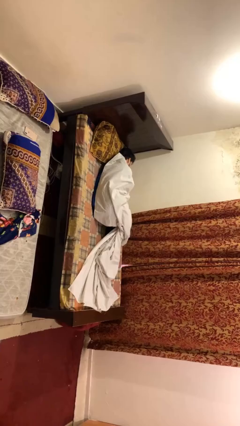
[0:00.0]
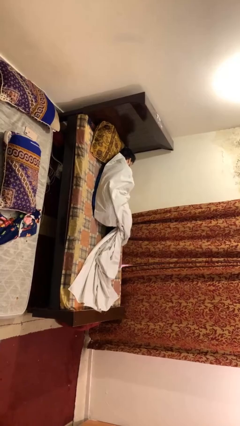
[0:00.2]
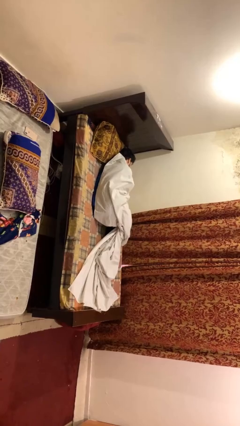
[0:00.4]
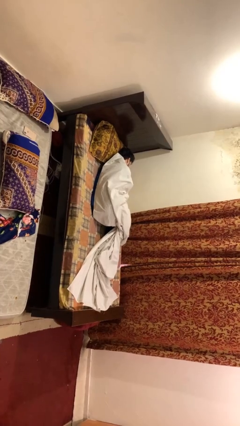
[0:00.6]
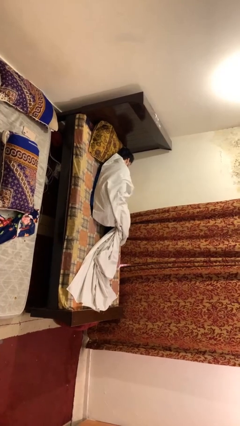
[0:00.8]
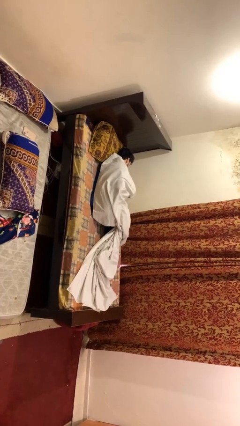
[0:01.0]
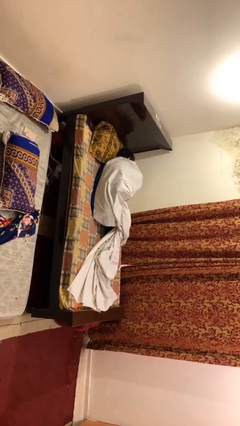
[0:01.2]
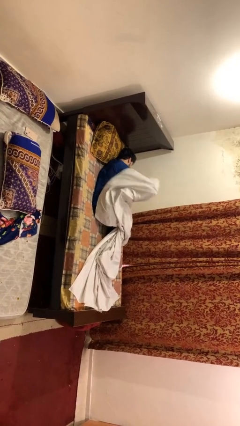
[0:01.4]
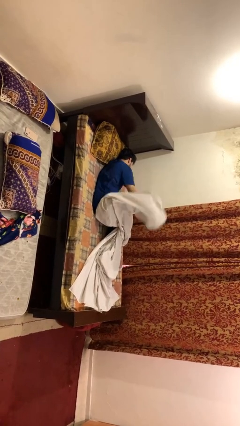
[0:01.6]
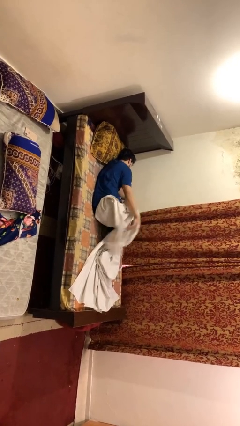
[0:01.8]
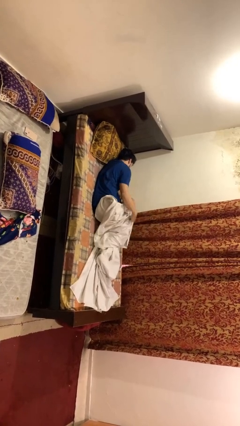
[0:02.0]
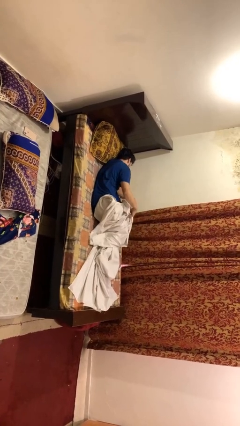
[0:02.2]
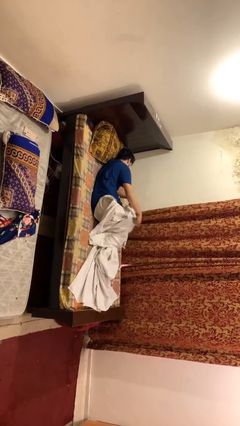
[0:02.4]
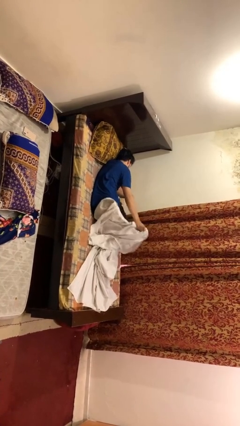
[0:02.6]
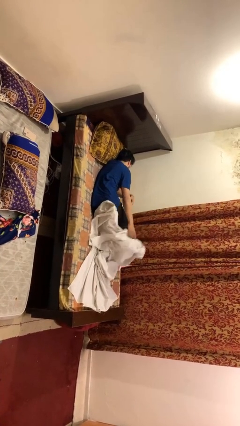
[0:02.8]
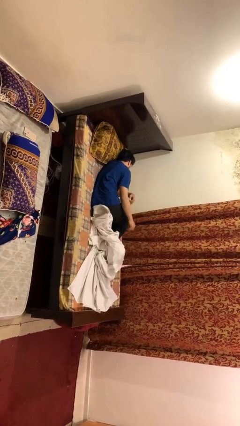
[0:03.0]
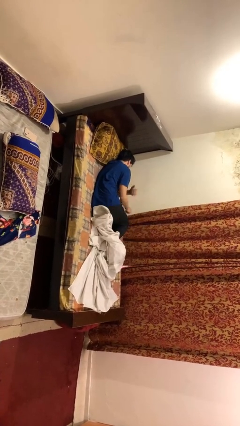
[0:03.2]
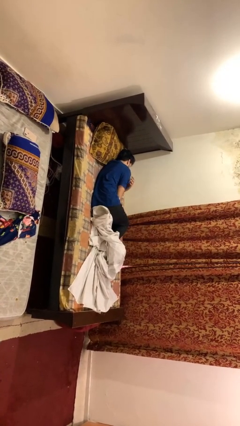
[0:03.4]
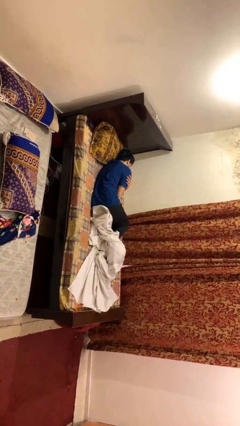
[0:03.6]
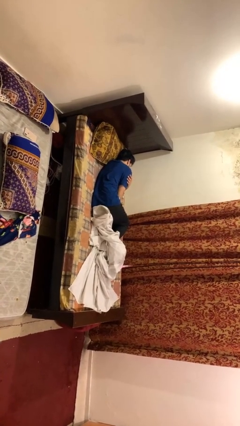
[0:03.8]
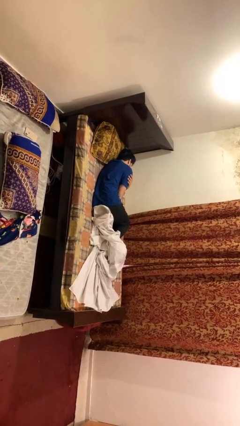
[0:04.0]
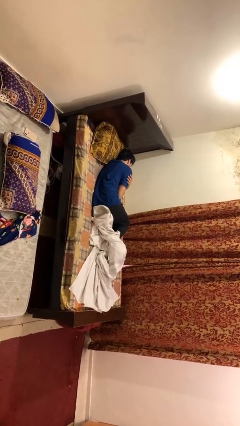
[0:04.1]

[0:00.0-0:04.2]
person uncovers with bedsheets

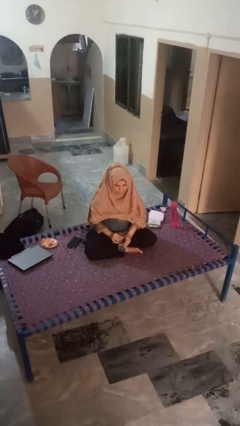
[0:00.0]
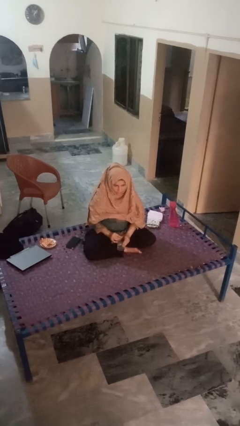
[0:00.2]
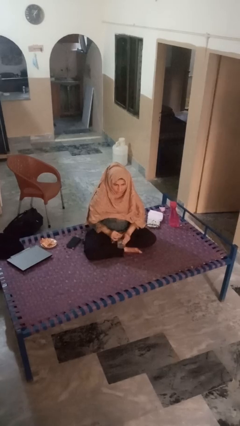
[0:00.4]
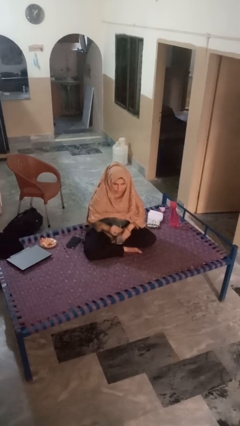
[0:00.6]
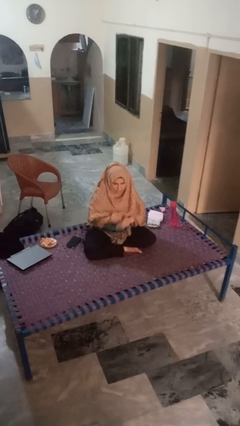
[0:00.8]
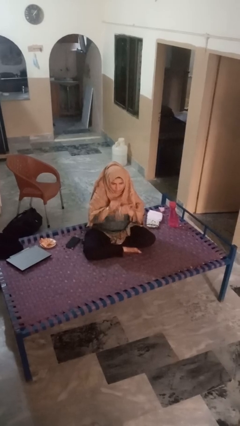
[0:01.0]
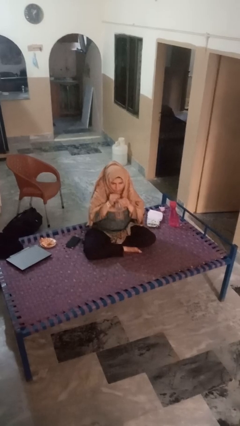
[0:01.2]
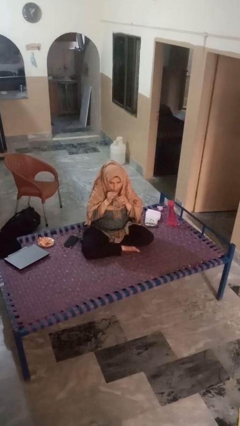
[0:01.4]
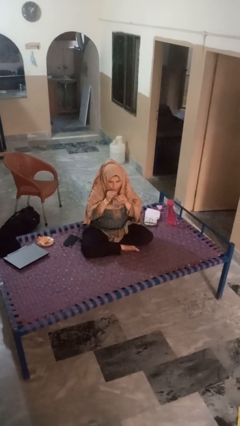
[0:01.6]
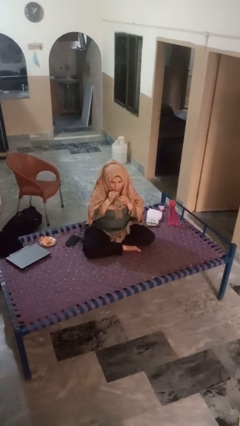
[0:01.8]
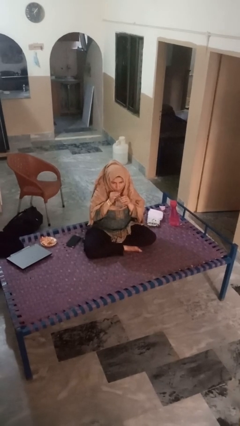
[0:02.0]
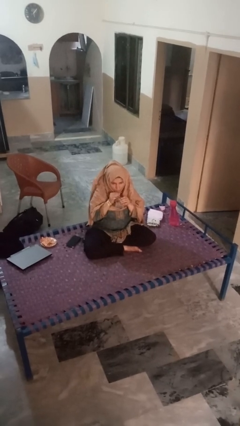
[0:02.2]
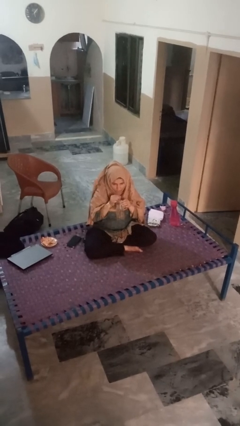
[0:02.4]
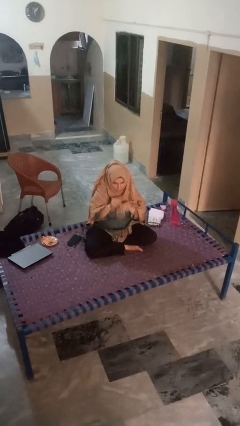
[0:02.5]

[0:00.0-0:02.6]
person drinks from straw

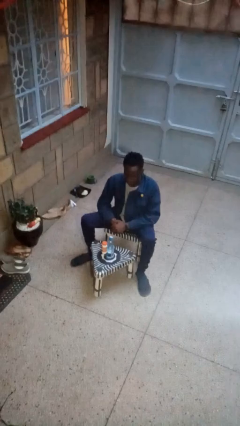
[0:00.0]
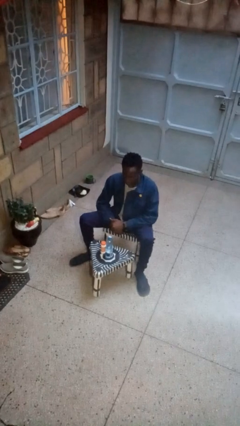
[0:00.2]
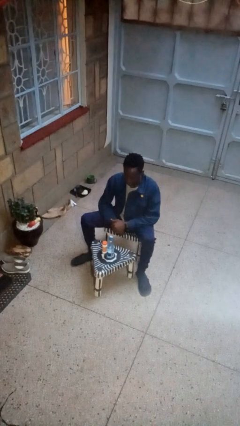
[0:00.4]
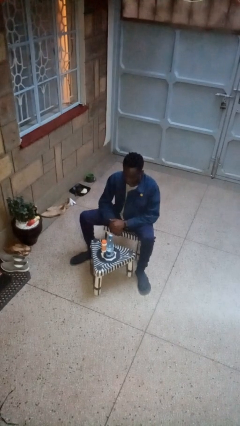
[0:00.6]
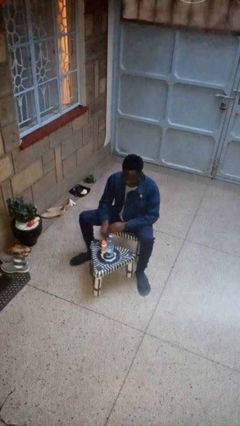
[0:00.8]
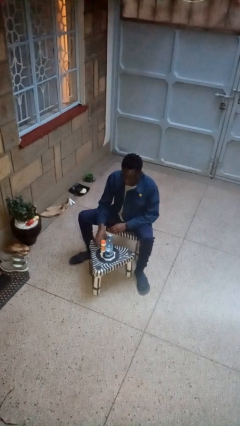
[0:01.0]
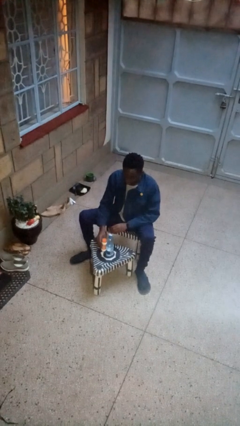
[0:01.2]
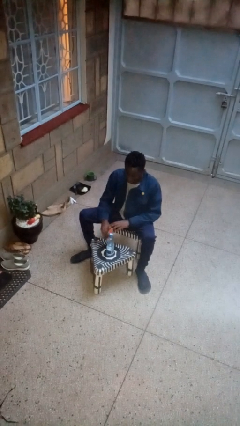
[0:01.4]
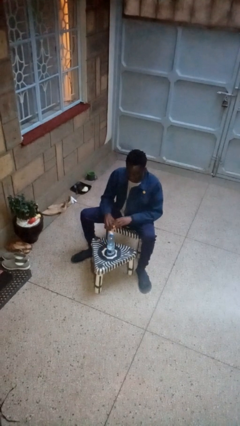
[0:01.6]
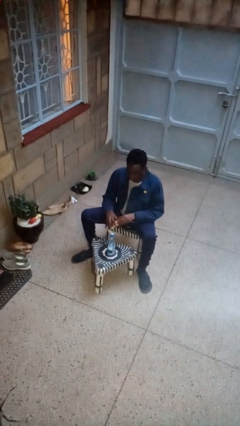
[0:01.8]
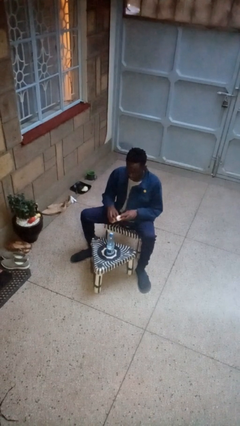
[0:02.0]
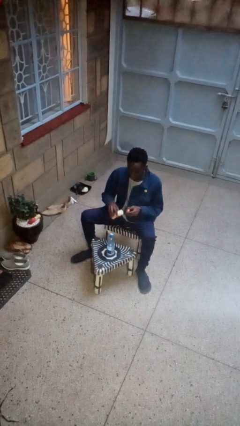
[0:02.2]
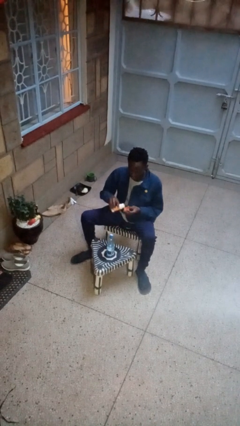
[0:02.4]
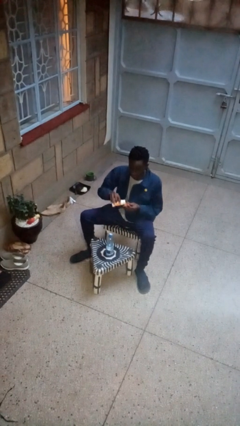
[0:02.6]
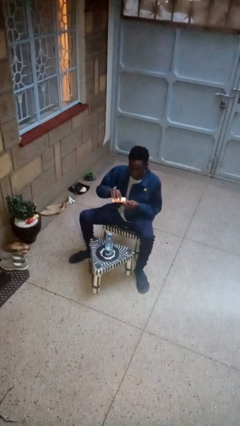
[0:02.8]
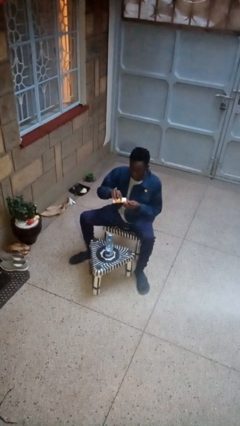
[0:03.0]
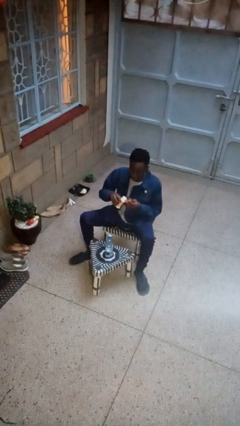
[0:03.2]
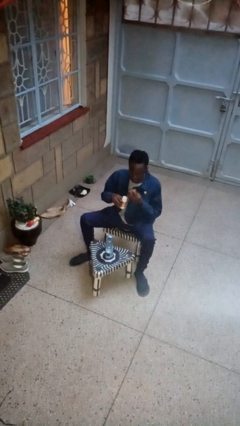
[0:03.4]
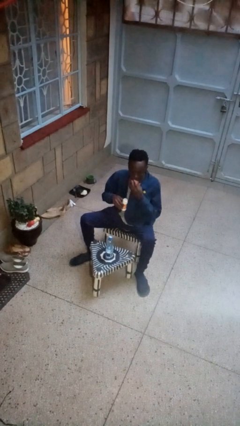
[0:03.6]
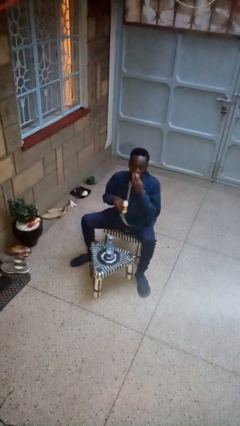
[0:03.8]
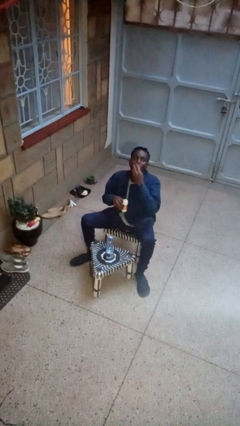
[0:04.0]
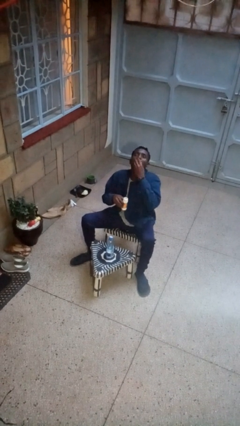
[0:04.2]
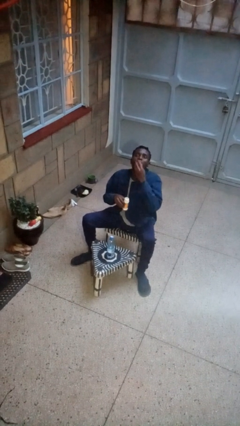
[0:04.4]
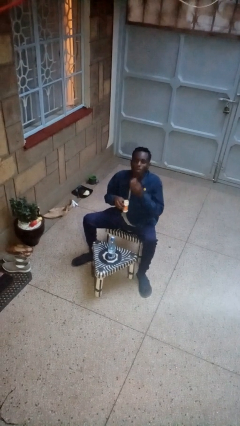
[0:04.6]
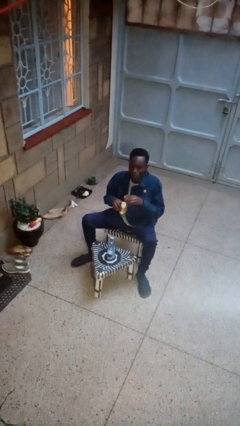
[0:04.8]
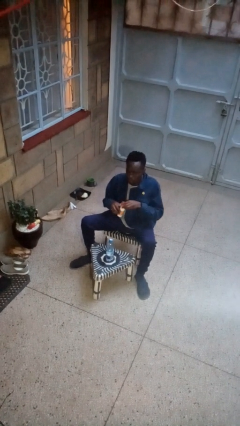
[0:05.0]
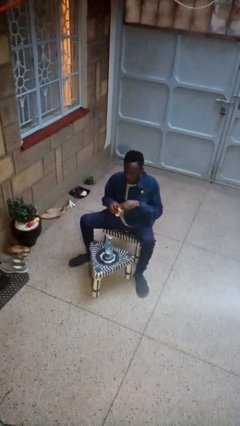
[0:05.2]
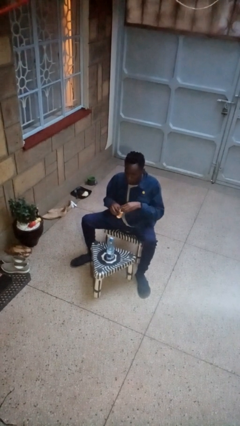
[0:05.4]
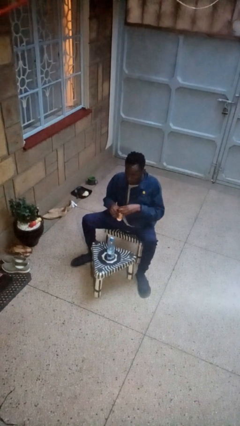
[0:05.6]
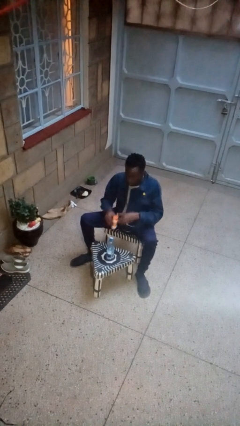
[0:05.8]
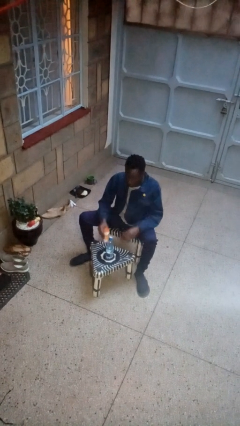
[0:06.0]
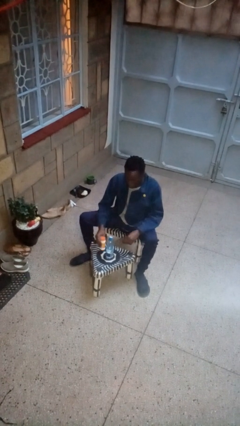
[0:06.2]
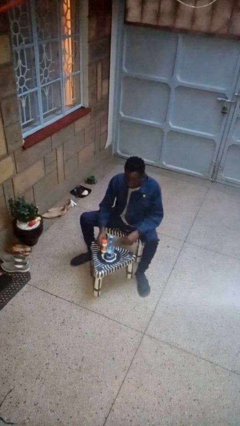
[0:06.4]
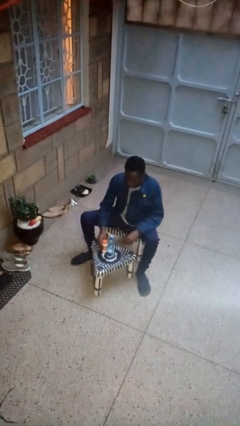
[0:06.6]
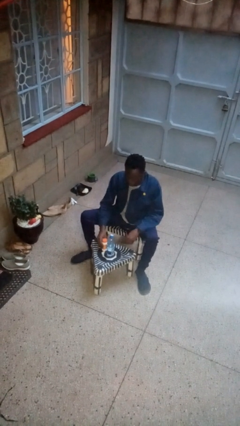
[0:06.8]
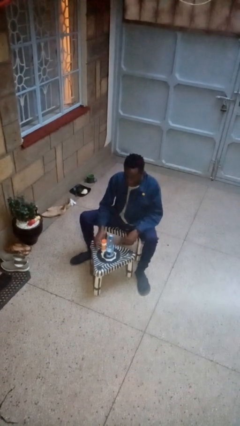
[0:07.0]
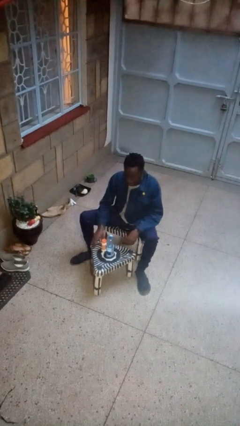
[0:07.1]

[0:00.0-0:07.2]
person takes medicine pills

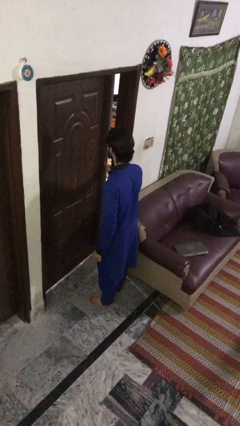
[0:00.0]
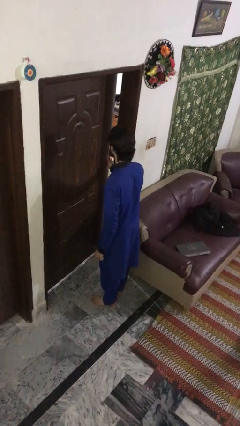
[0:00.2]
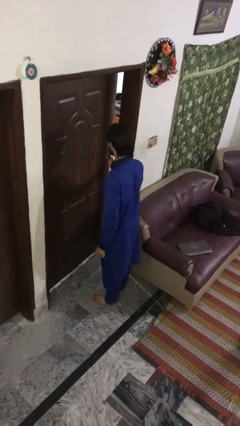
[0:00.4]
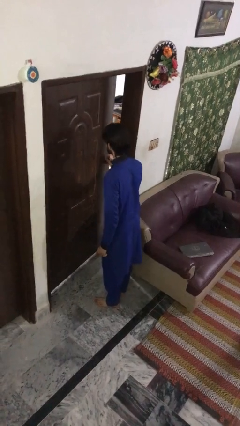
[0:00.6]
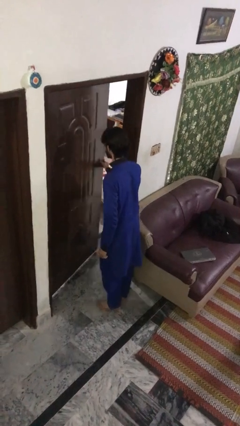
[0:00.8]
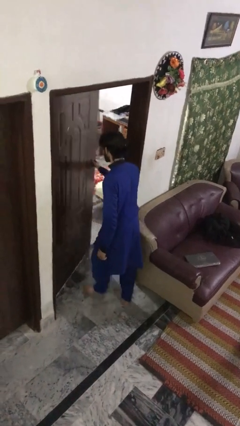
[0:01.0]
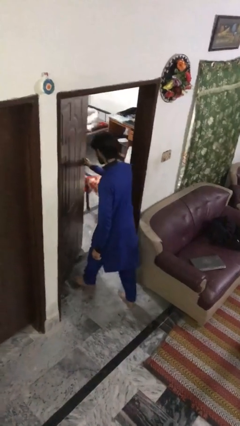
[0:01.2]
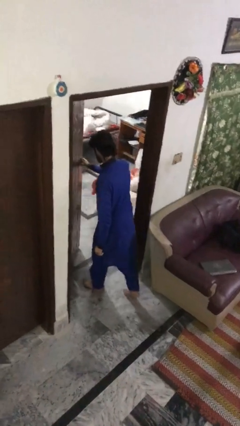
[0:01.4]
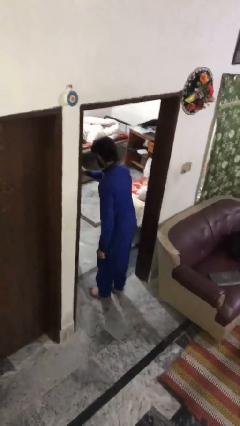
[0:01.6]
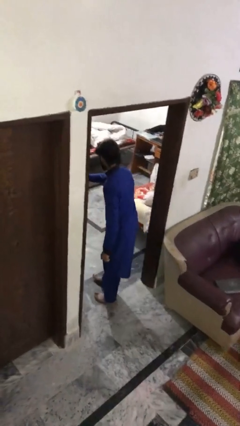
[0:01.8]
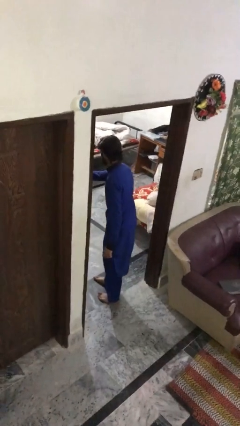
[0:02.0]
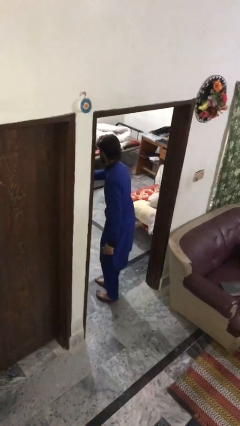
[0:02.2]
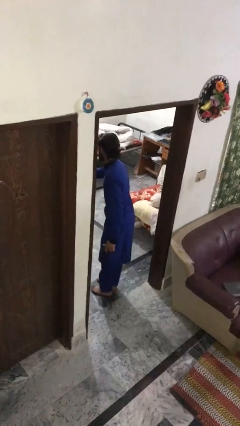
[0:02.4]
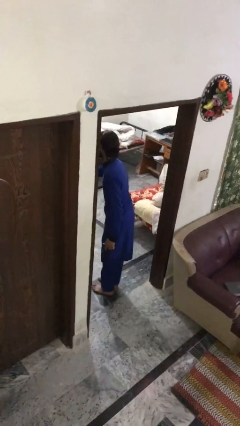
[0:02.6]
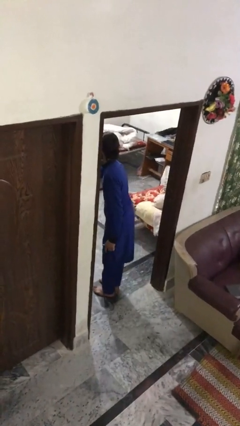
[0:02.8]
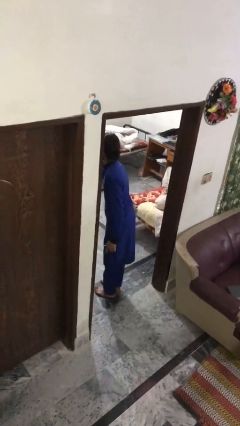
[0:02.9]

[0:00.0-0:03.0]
person opens facility door

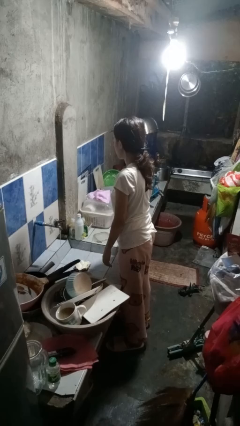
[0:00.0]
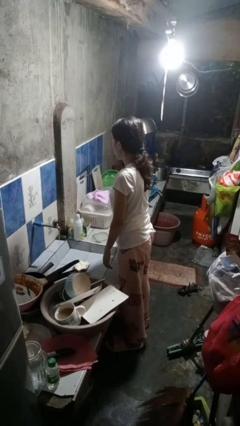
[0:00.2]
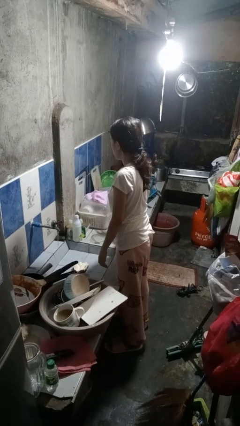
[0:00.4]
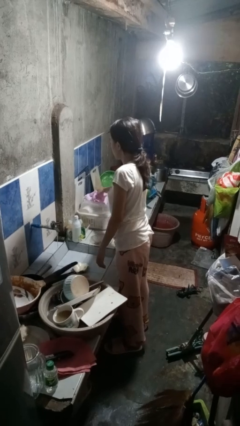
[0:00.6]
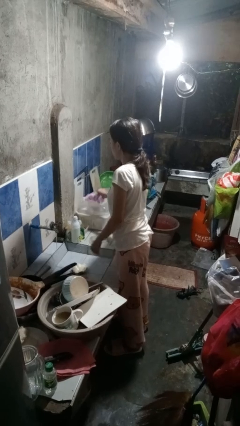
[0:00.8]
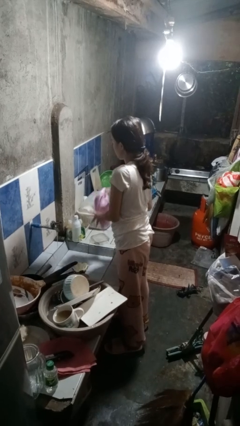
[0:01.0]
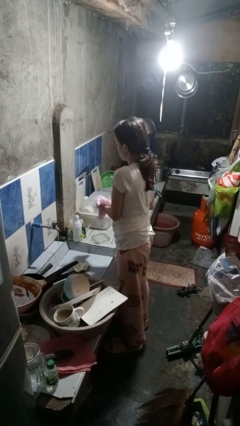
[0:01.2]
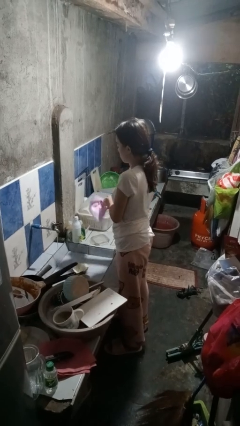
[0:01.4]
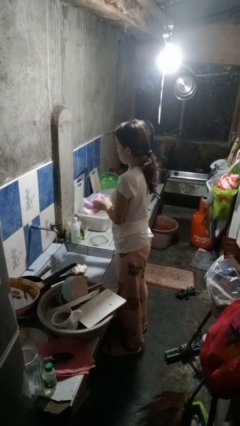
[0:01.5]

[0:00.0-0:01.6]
person dries hands with towel
